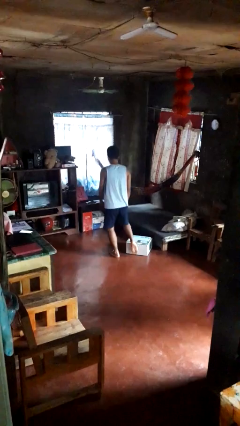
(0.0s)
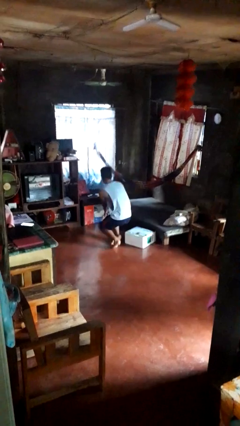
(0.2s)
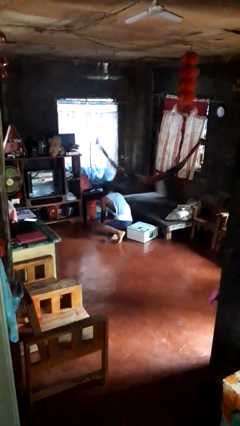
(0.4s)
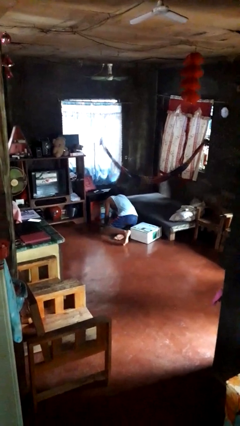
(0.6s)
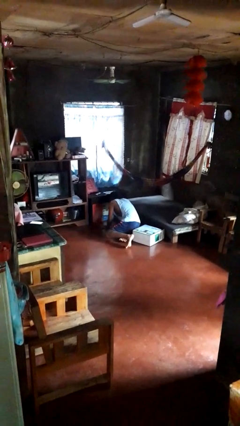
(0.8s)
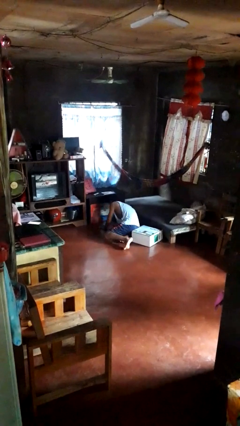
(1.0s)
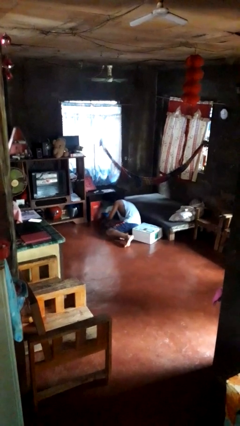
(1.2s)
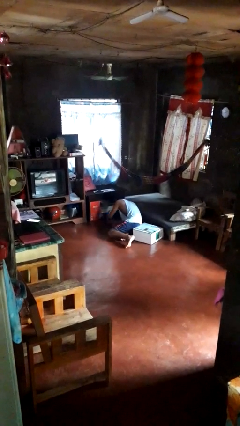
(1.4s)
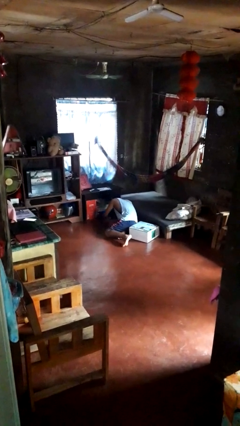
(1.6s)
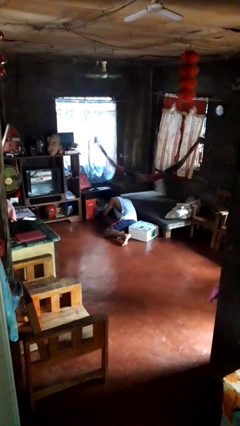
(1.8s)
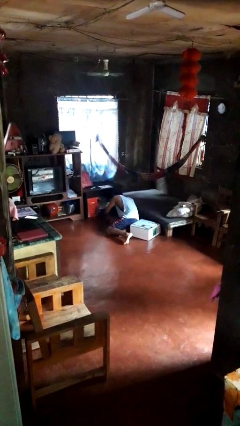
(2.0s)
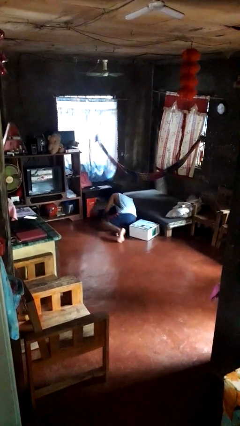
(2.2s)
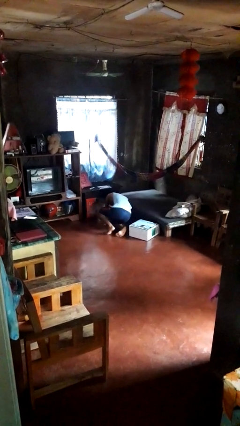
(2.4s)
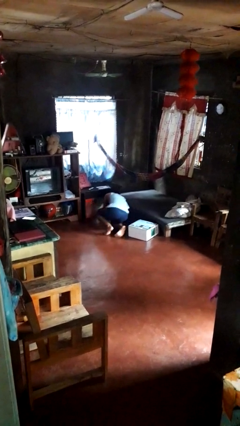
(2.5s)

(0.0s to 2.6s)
person trips on object on floor

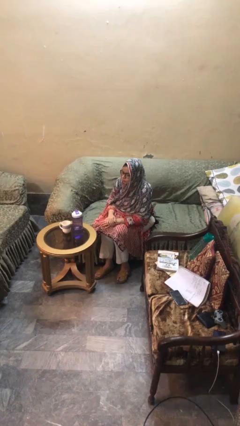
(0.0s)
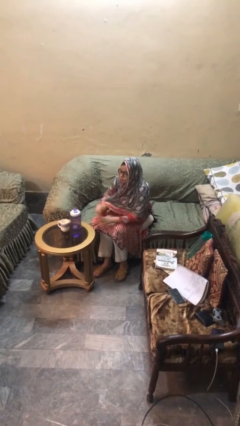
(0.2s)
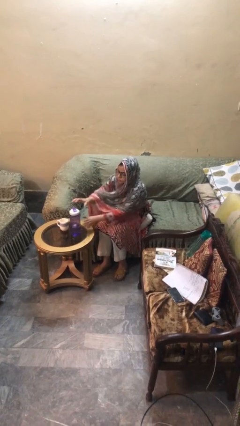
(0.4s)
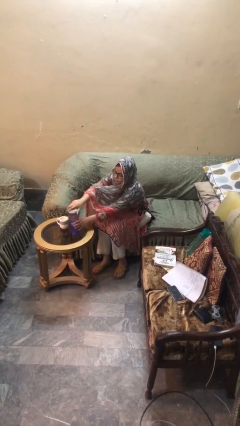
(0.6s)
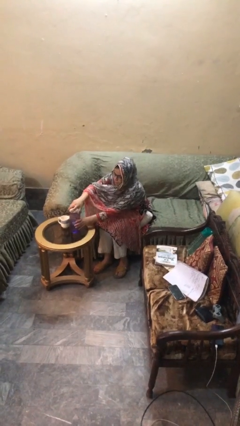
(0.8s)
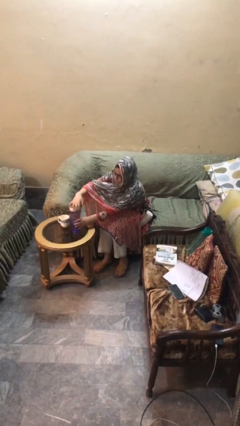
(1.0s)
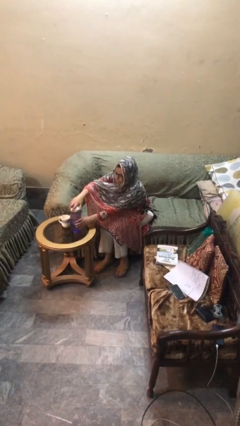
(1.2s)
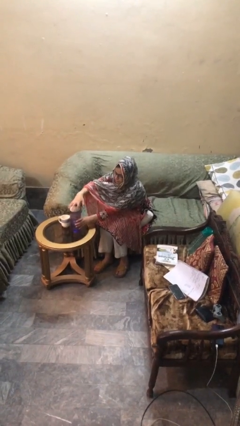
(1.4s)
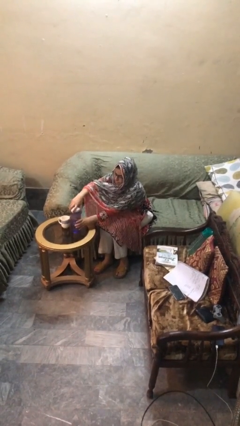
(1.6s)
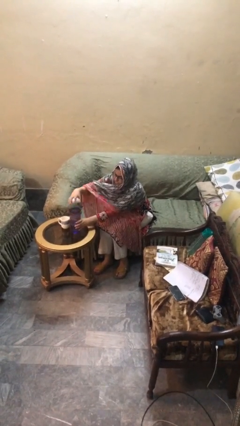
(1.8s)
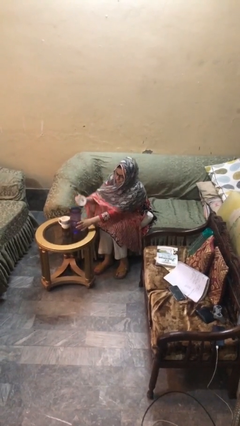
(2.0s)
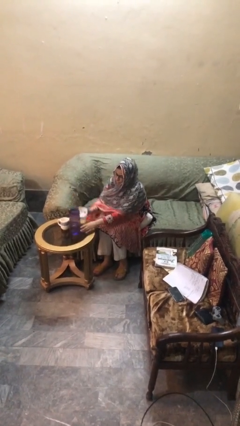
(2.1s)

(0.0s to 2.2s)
person unscrews lid from bottle

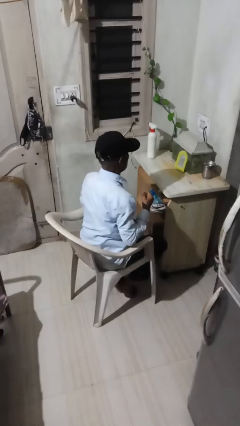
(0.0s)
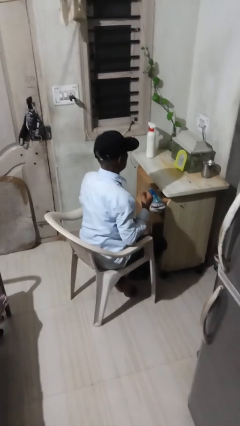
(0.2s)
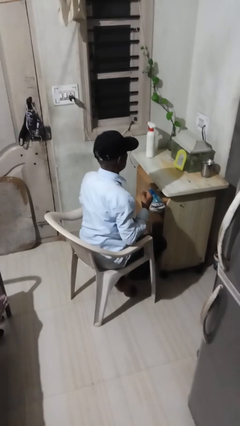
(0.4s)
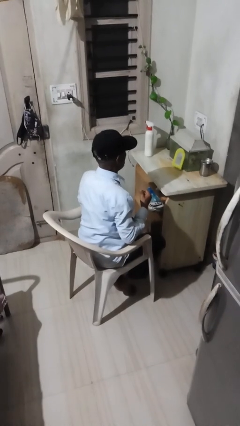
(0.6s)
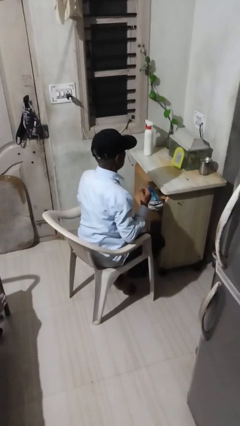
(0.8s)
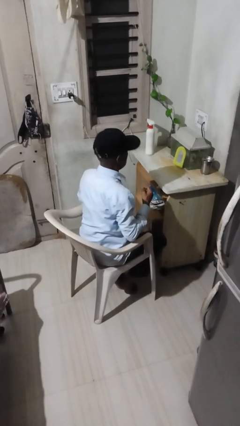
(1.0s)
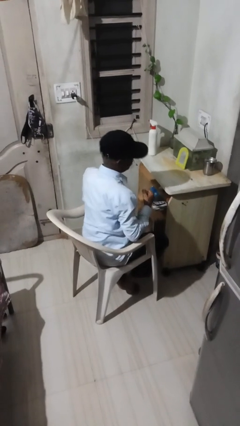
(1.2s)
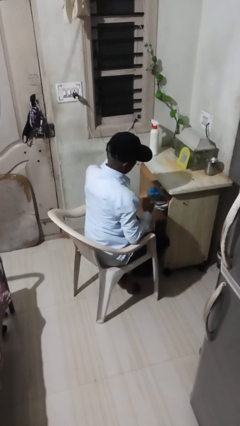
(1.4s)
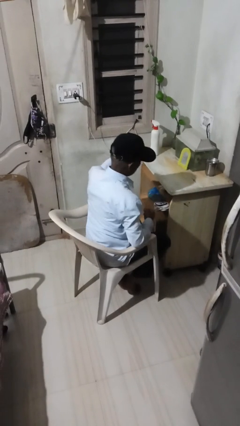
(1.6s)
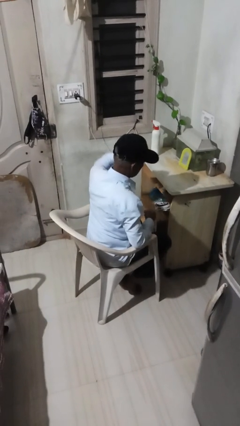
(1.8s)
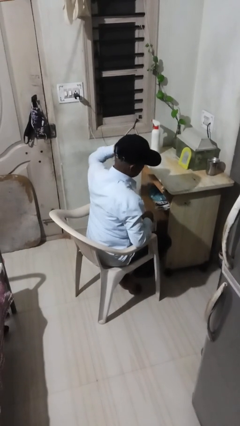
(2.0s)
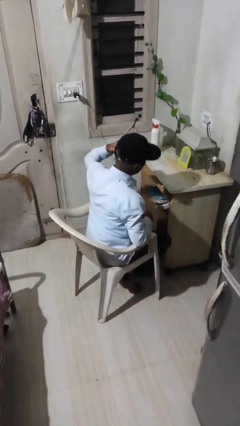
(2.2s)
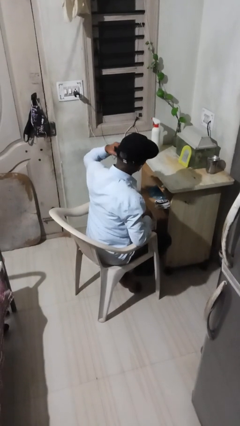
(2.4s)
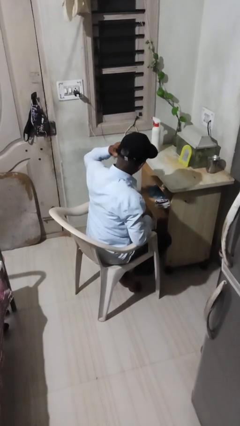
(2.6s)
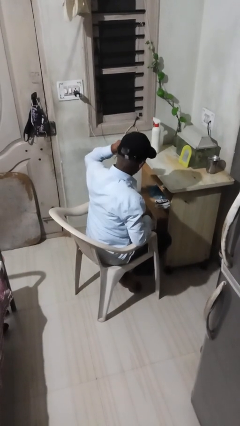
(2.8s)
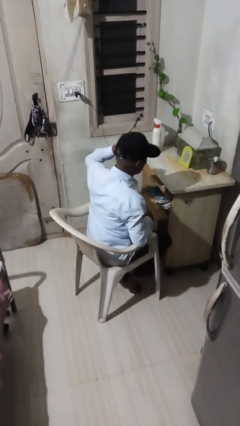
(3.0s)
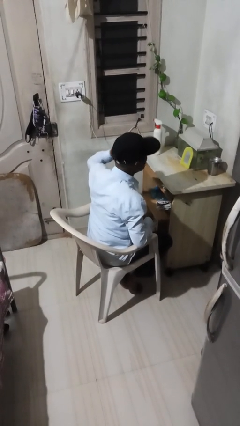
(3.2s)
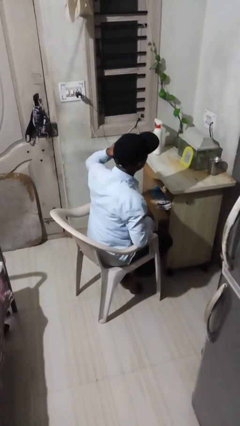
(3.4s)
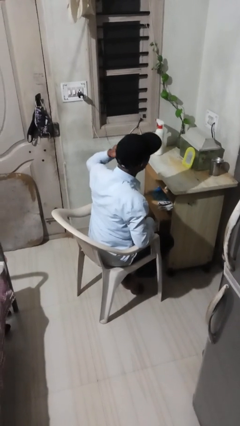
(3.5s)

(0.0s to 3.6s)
person puts fingers in ear

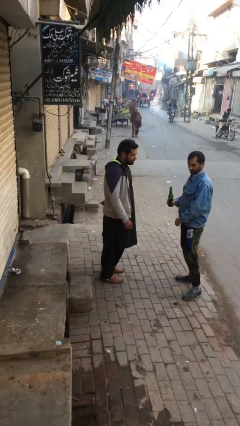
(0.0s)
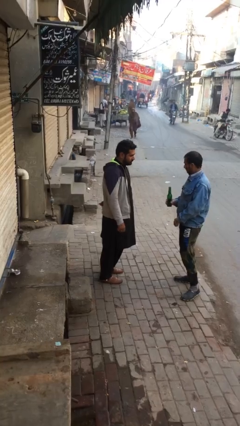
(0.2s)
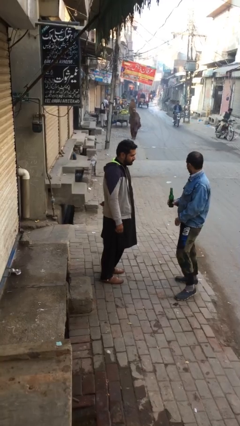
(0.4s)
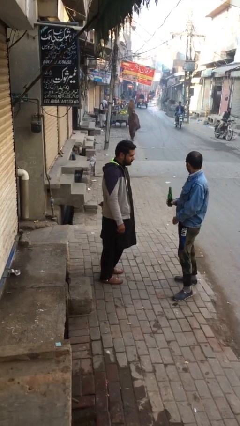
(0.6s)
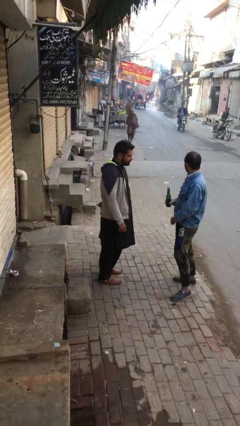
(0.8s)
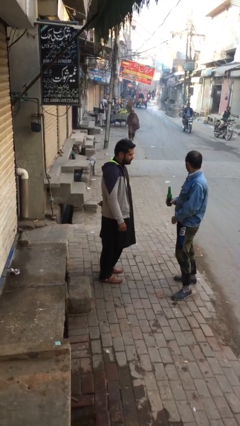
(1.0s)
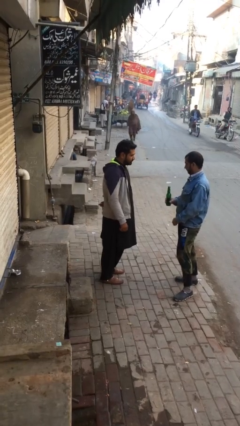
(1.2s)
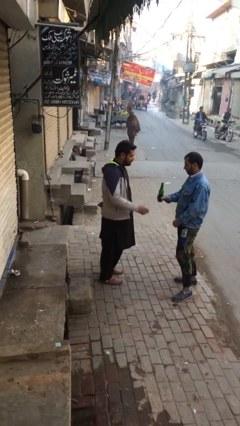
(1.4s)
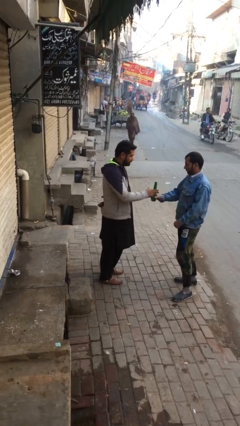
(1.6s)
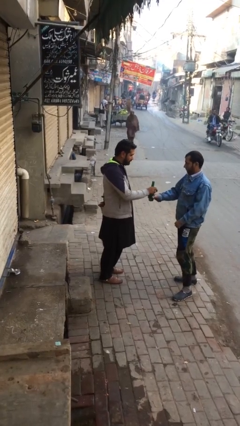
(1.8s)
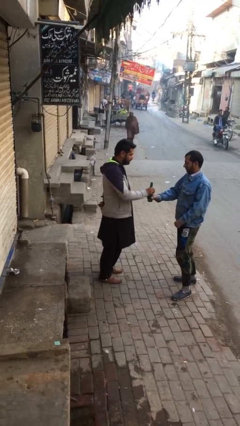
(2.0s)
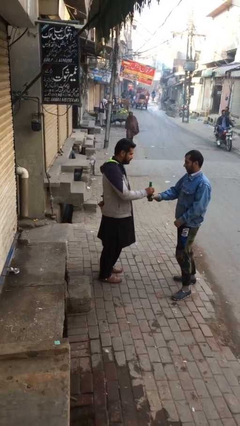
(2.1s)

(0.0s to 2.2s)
person transfers object to person

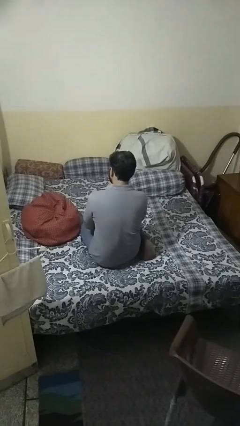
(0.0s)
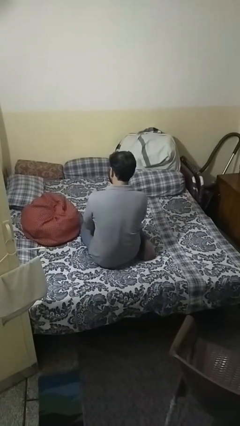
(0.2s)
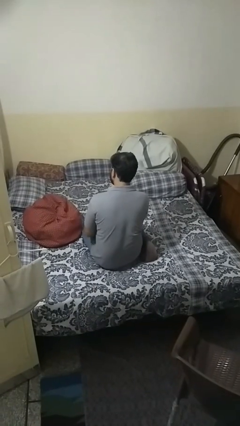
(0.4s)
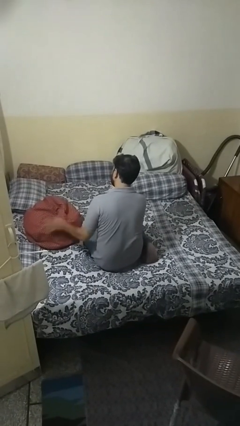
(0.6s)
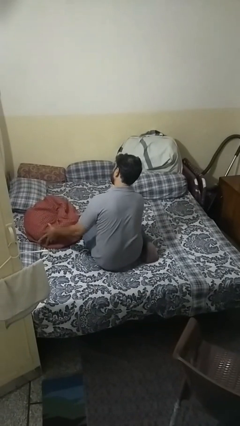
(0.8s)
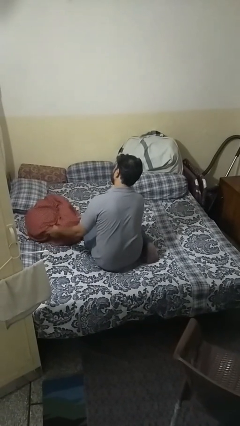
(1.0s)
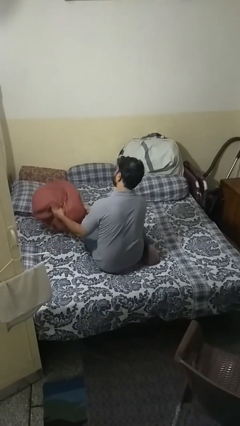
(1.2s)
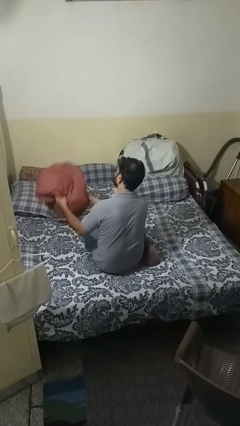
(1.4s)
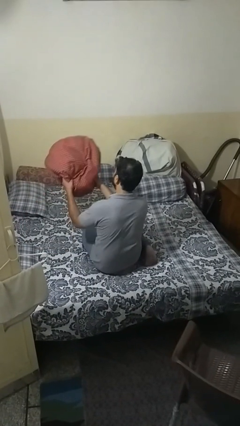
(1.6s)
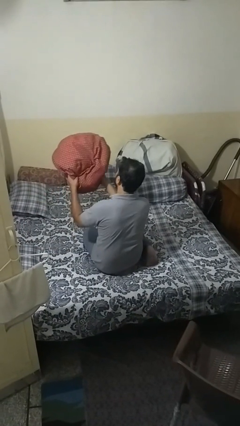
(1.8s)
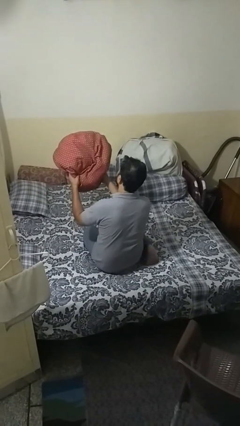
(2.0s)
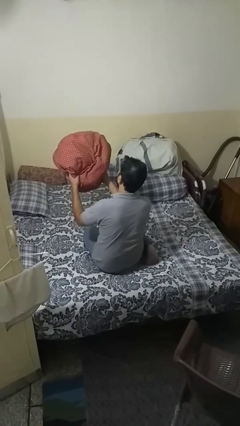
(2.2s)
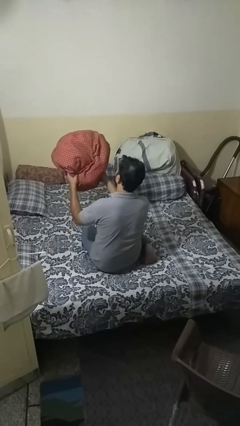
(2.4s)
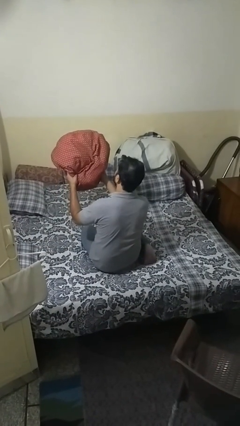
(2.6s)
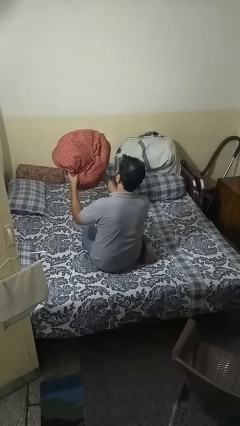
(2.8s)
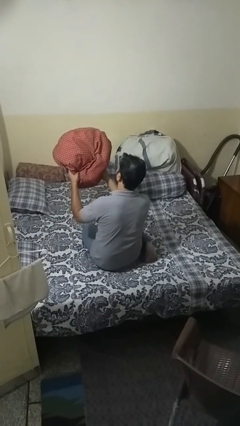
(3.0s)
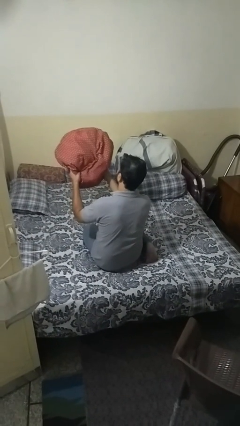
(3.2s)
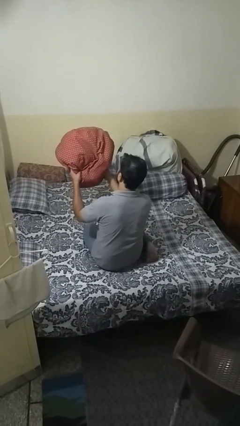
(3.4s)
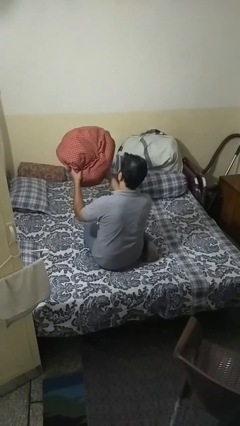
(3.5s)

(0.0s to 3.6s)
person picks up object from bed

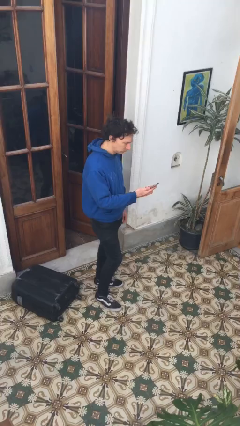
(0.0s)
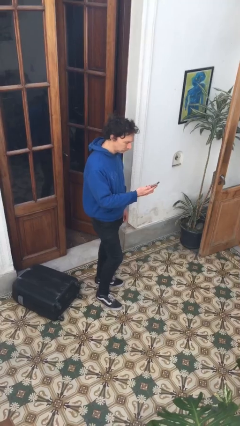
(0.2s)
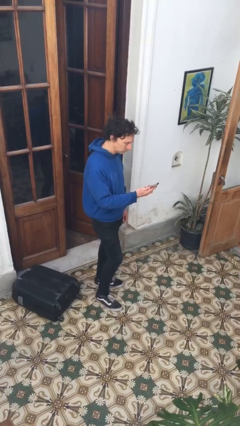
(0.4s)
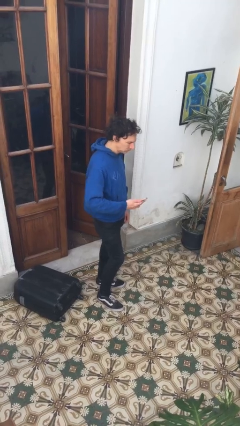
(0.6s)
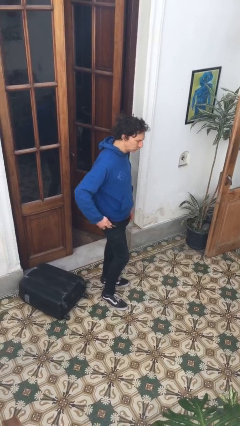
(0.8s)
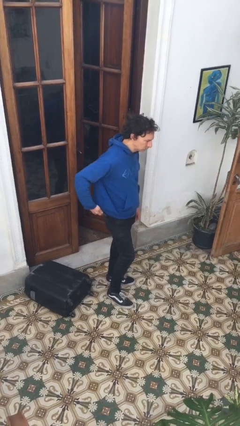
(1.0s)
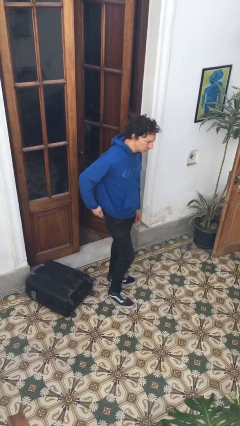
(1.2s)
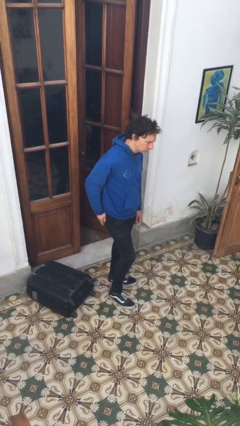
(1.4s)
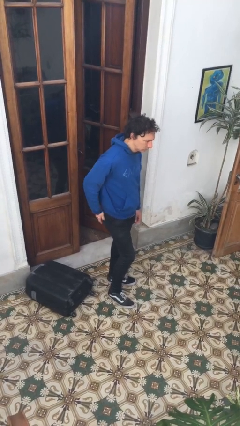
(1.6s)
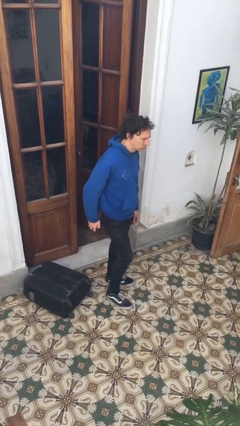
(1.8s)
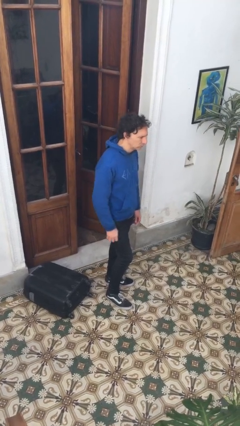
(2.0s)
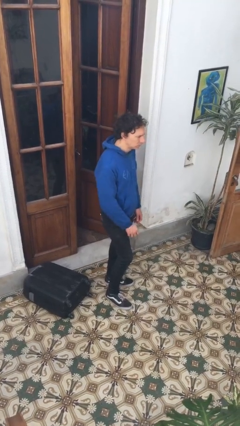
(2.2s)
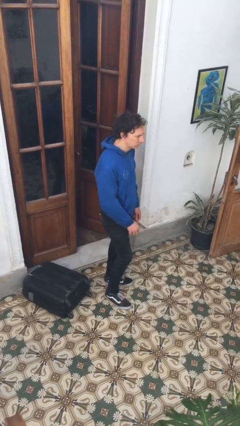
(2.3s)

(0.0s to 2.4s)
person puts phone into pocket

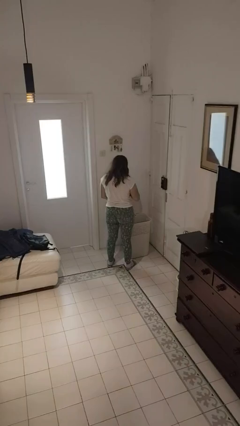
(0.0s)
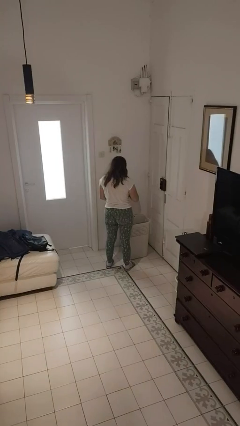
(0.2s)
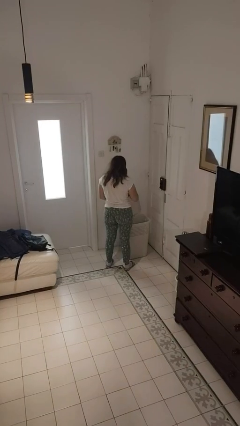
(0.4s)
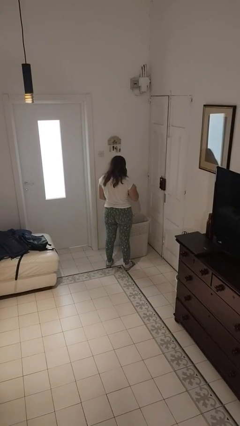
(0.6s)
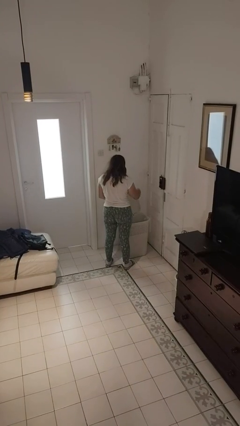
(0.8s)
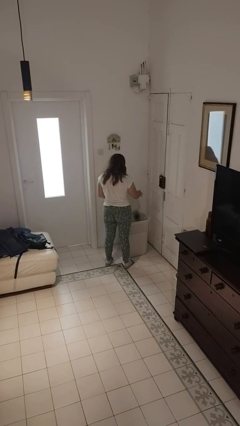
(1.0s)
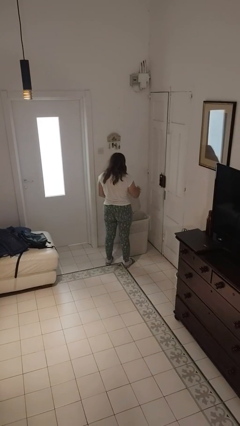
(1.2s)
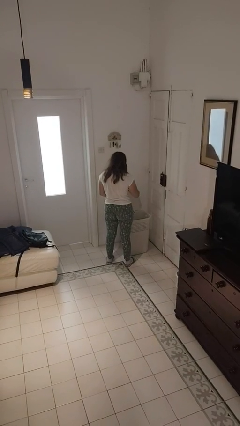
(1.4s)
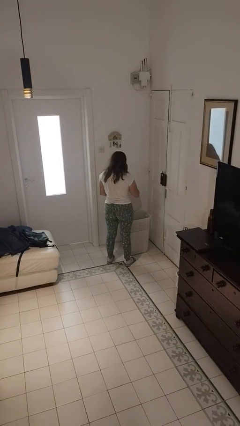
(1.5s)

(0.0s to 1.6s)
person discards trash
